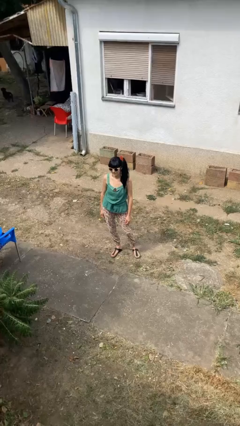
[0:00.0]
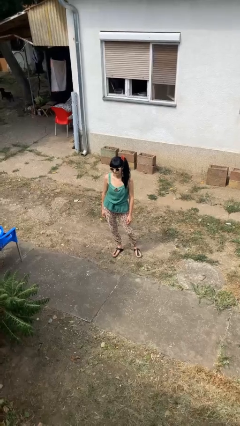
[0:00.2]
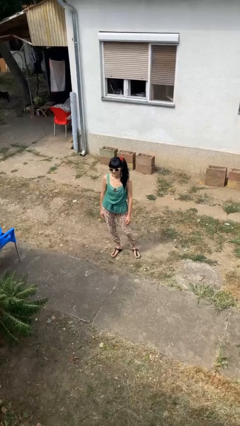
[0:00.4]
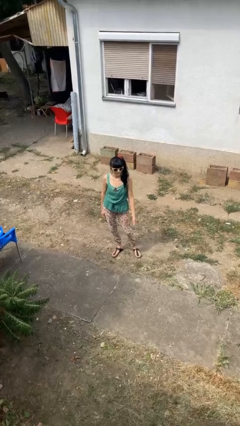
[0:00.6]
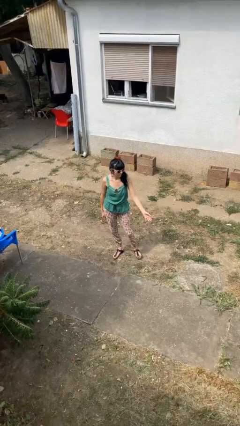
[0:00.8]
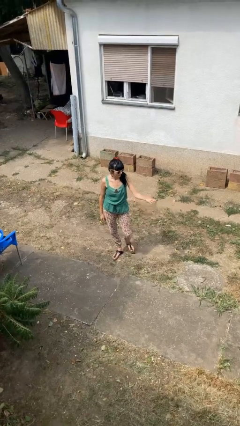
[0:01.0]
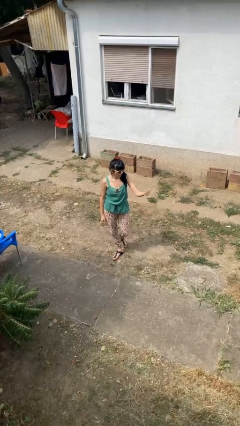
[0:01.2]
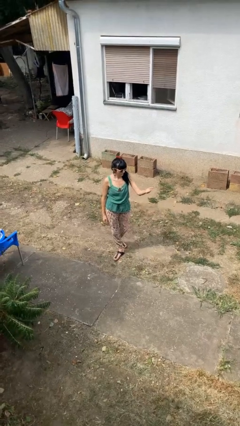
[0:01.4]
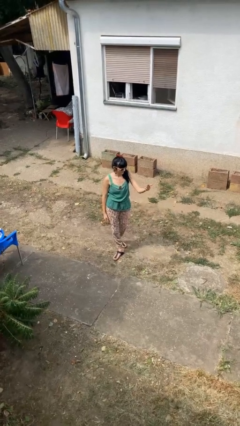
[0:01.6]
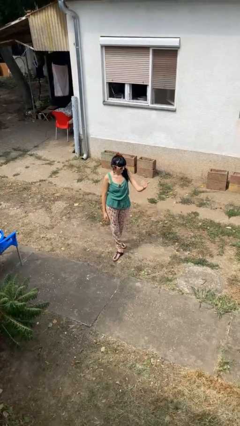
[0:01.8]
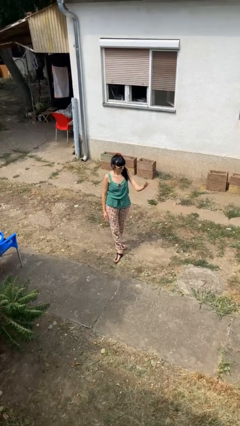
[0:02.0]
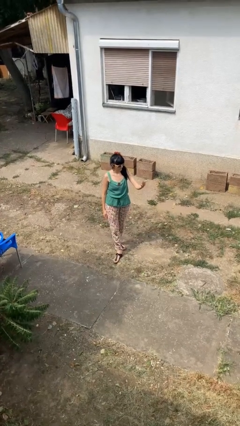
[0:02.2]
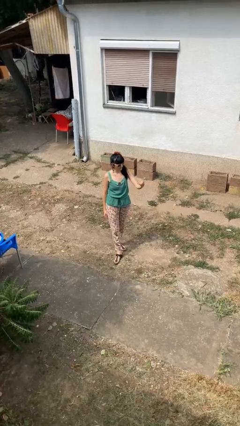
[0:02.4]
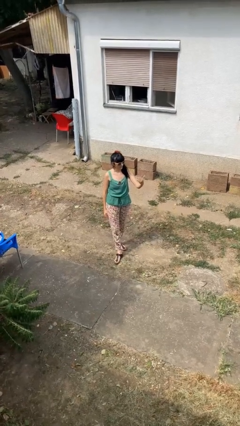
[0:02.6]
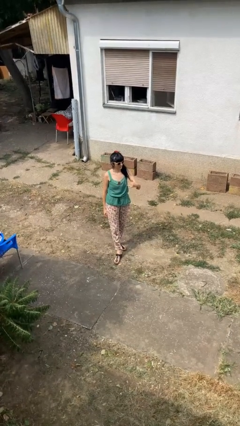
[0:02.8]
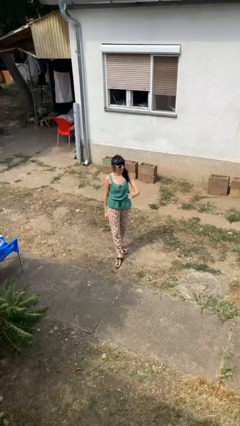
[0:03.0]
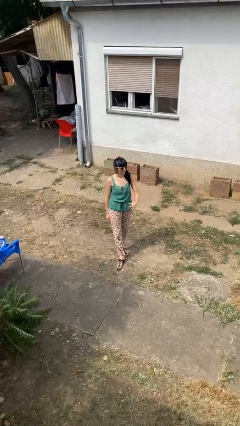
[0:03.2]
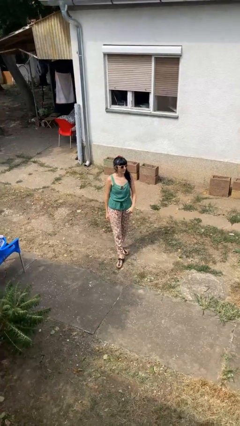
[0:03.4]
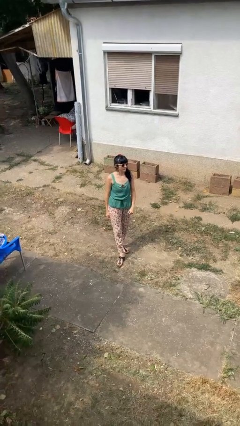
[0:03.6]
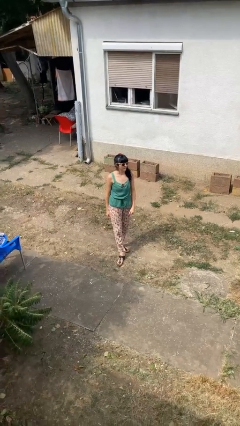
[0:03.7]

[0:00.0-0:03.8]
person gestures come here

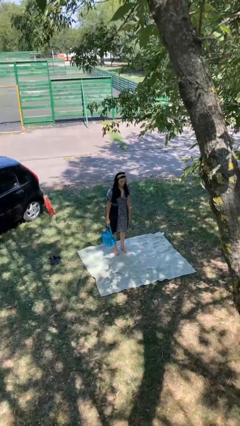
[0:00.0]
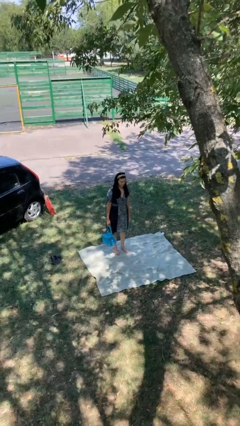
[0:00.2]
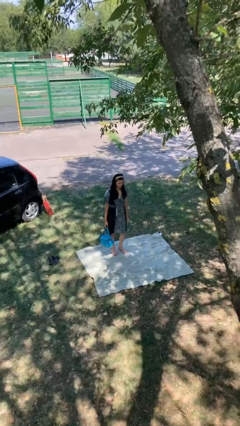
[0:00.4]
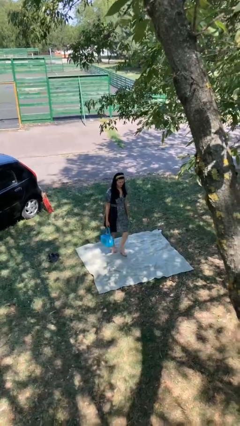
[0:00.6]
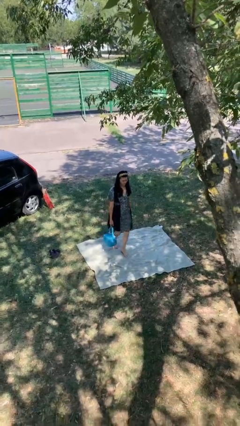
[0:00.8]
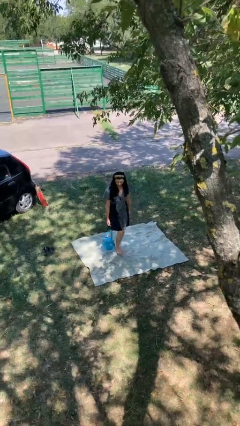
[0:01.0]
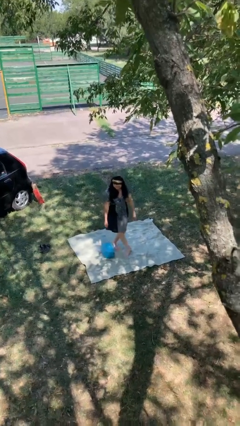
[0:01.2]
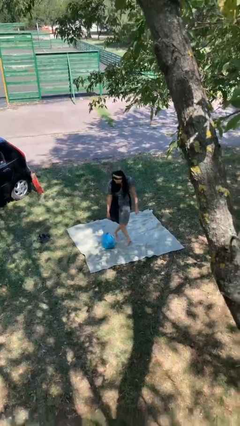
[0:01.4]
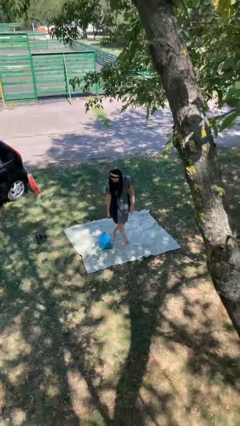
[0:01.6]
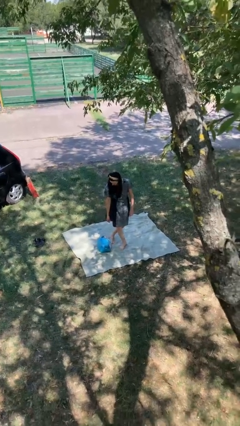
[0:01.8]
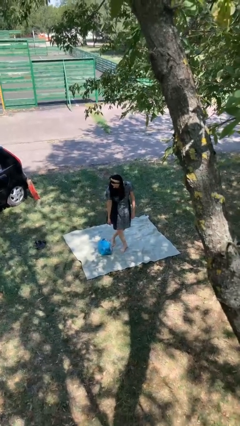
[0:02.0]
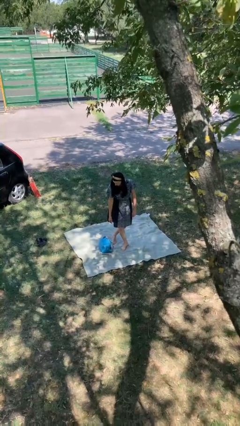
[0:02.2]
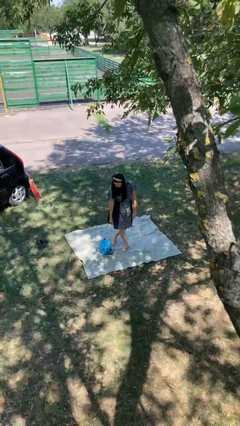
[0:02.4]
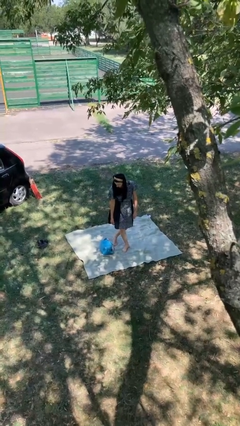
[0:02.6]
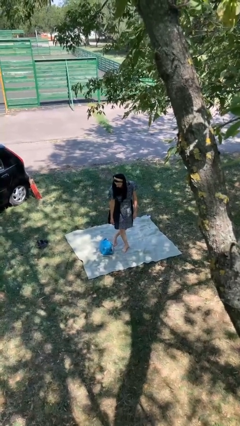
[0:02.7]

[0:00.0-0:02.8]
person drops object

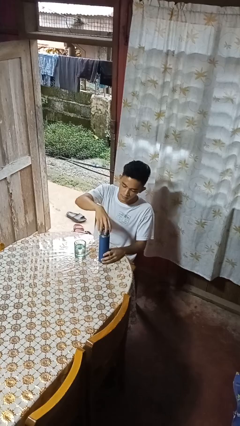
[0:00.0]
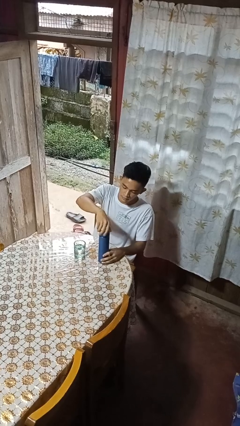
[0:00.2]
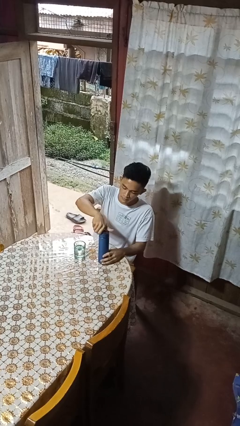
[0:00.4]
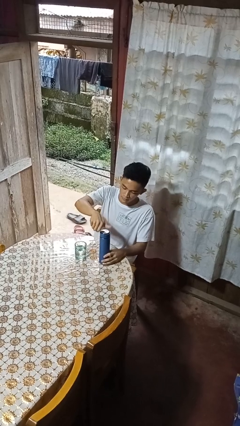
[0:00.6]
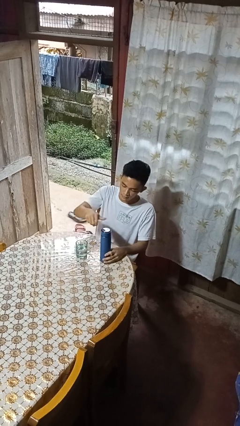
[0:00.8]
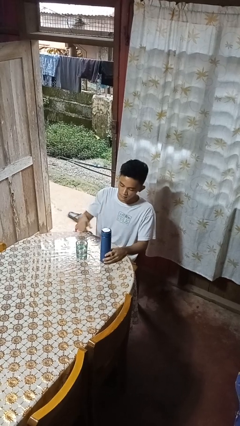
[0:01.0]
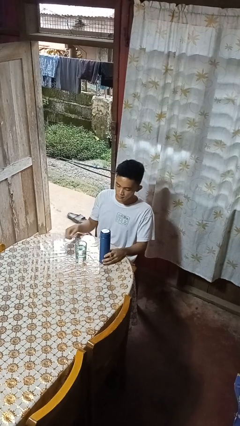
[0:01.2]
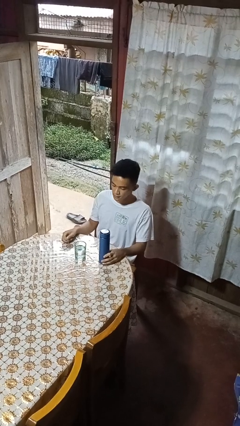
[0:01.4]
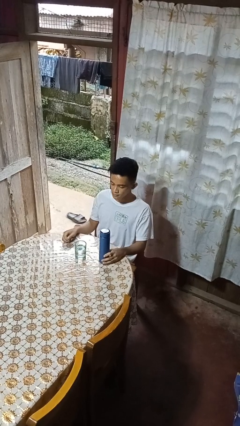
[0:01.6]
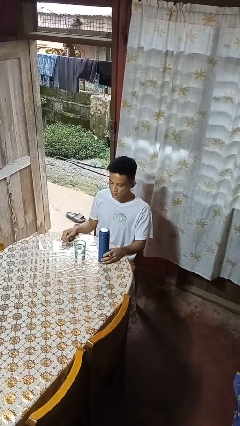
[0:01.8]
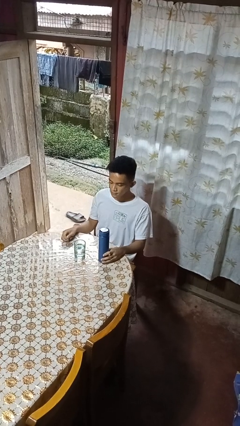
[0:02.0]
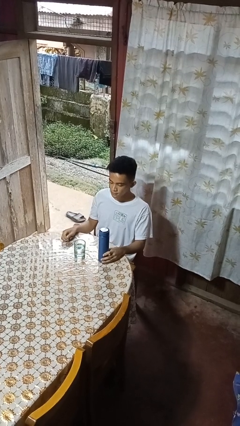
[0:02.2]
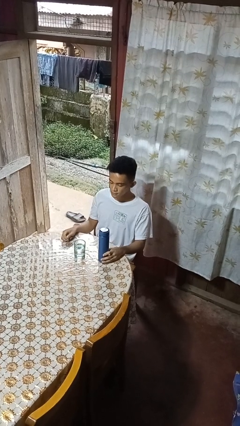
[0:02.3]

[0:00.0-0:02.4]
person screws lid to bottle

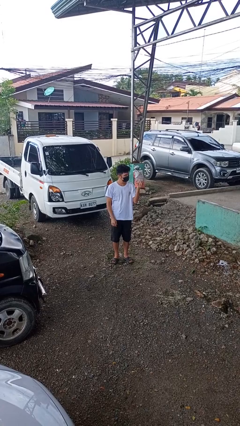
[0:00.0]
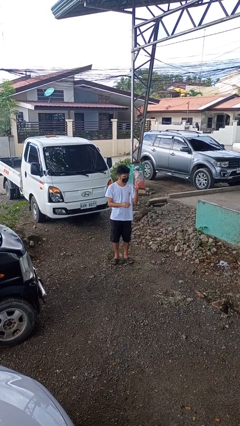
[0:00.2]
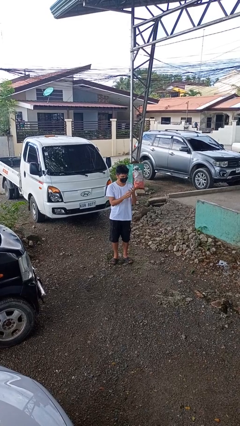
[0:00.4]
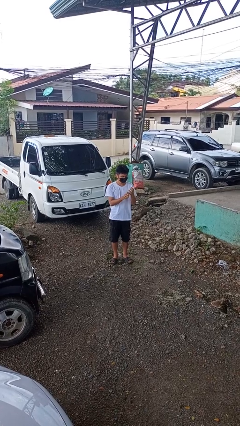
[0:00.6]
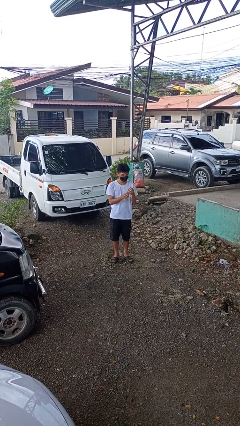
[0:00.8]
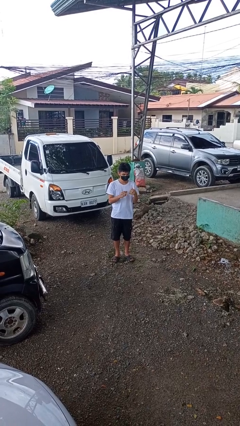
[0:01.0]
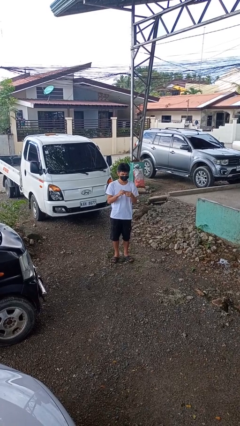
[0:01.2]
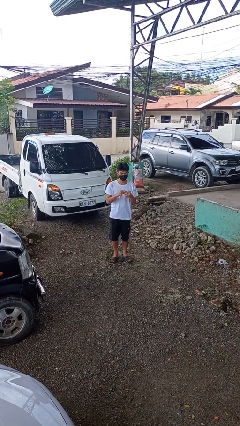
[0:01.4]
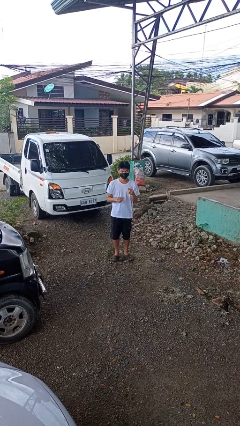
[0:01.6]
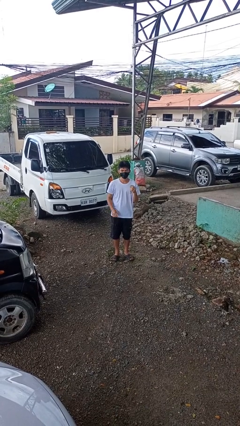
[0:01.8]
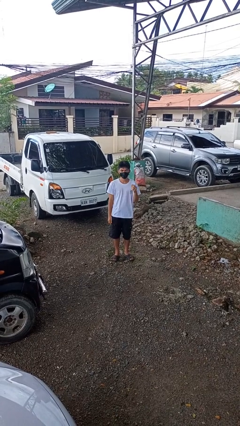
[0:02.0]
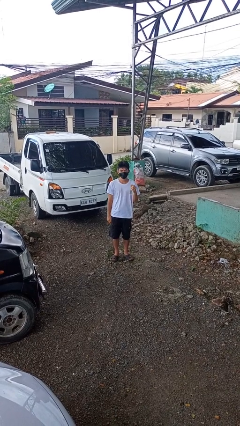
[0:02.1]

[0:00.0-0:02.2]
person takes off ring

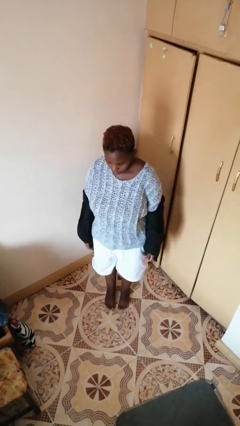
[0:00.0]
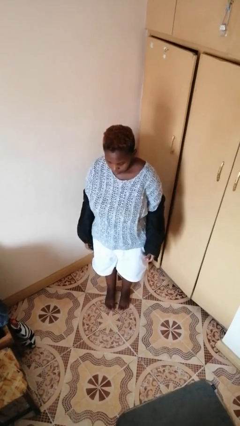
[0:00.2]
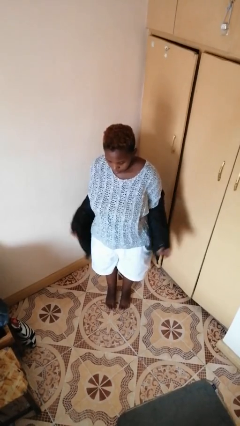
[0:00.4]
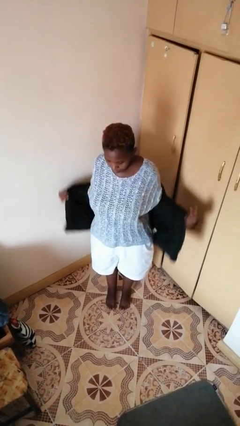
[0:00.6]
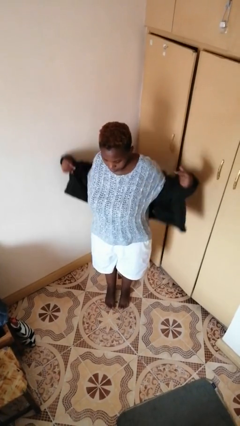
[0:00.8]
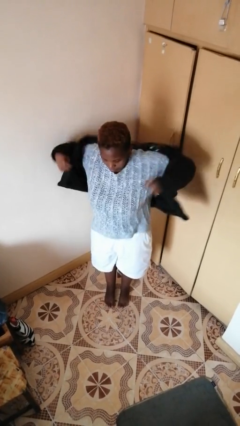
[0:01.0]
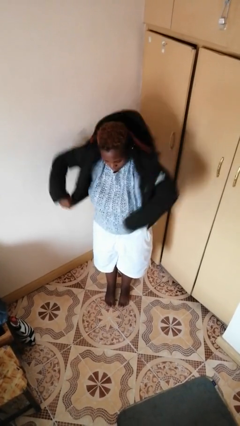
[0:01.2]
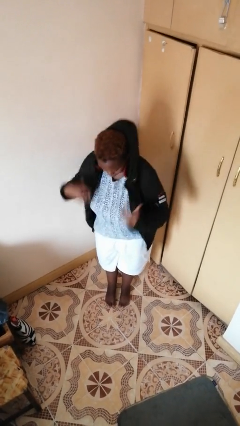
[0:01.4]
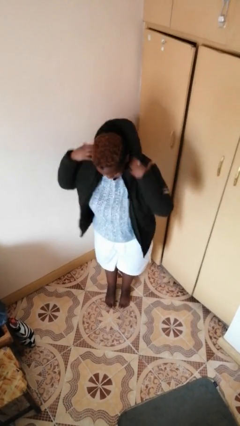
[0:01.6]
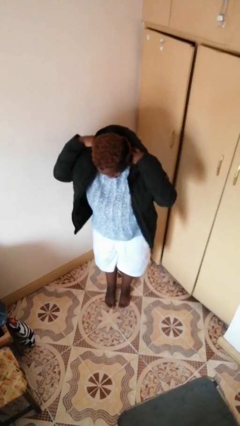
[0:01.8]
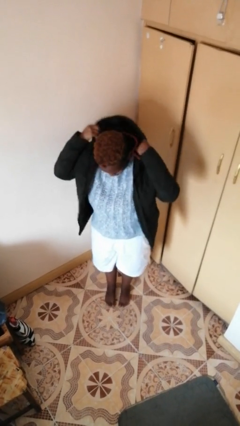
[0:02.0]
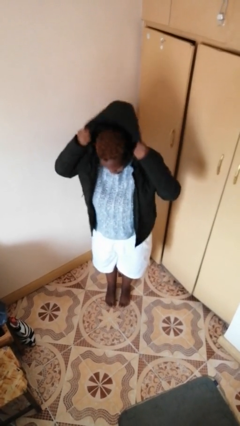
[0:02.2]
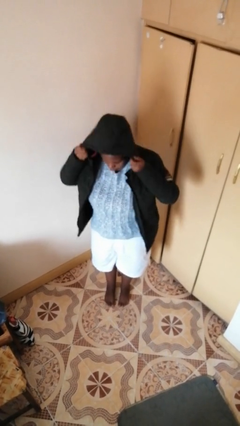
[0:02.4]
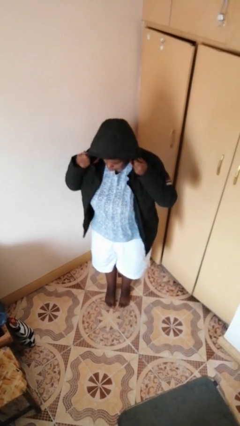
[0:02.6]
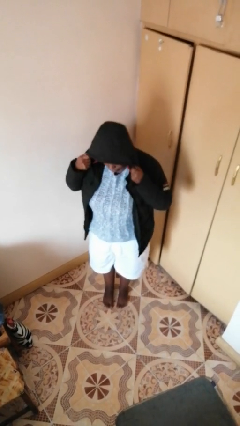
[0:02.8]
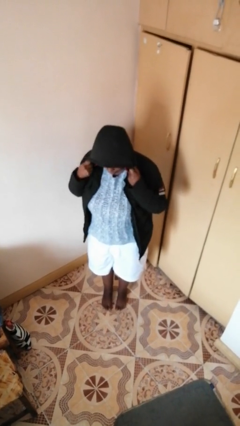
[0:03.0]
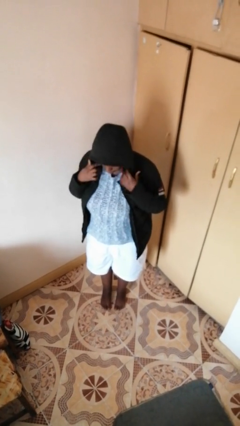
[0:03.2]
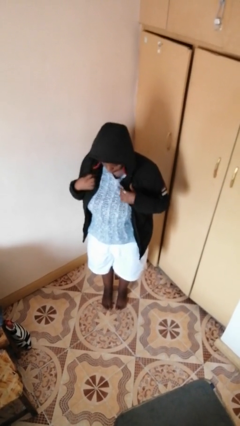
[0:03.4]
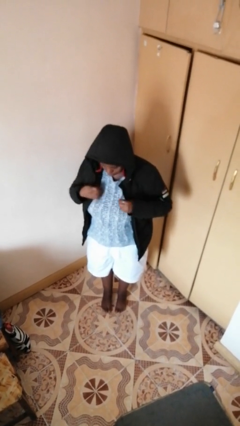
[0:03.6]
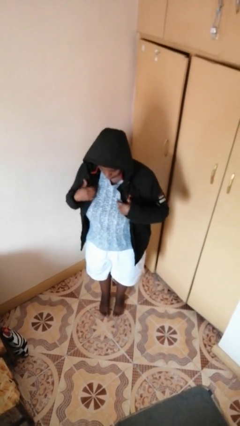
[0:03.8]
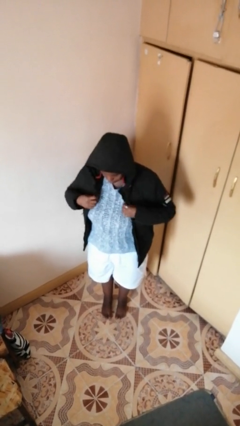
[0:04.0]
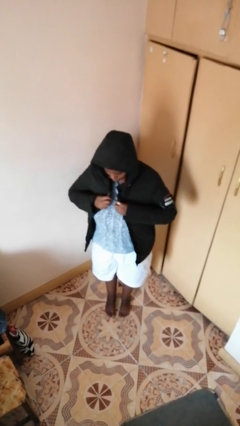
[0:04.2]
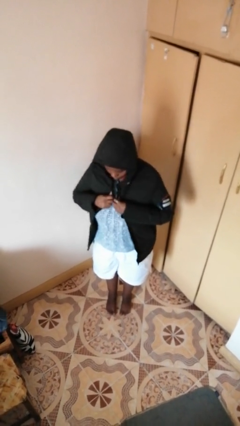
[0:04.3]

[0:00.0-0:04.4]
person puts on hoodie

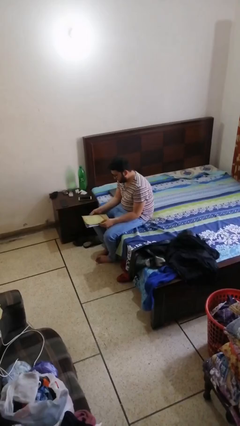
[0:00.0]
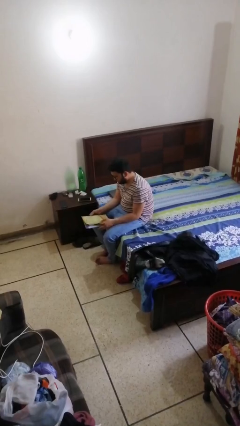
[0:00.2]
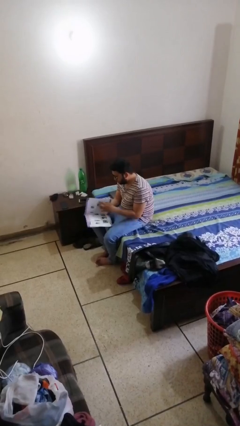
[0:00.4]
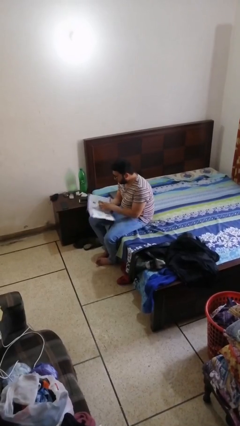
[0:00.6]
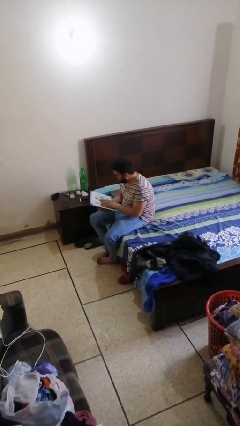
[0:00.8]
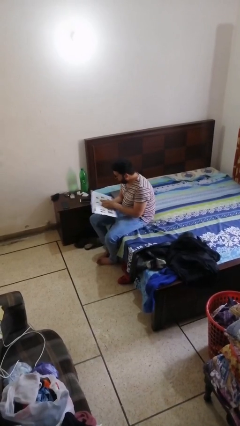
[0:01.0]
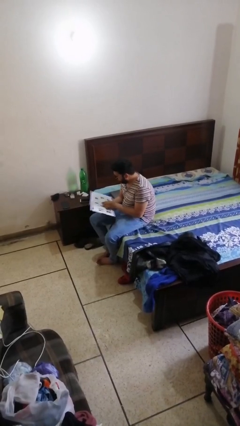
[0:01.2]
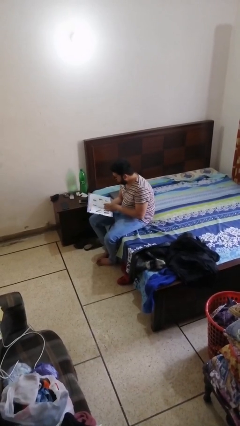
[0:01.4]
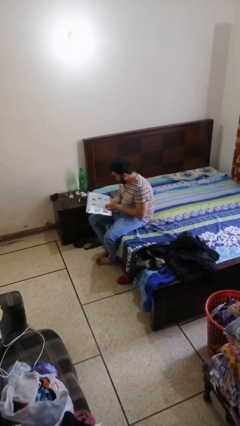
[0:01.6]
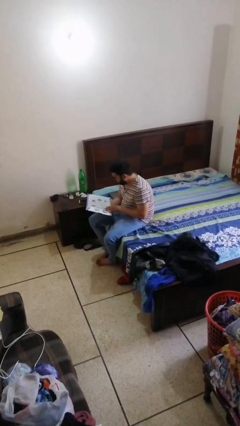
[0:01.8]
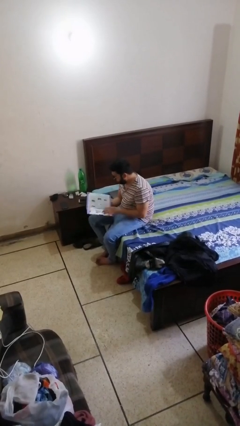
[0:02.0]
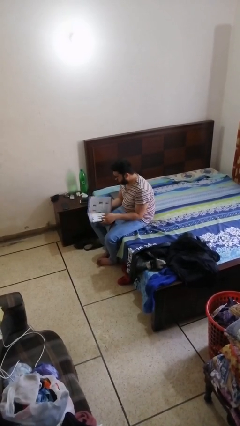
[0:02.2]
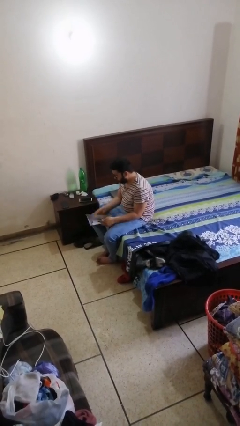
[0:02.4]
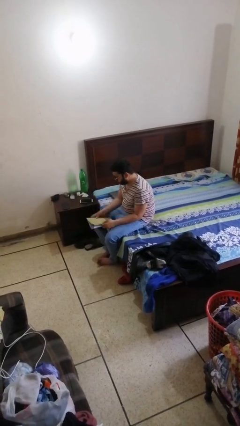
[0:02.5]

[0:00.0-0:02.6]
person reads document
